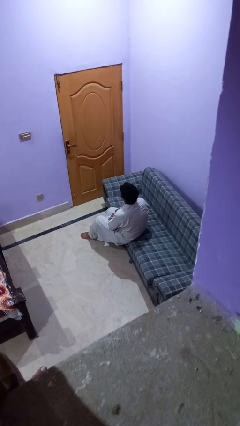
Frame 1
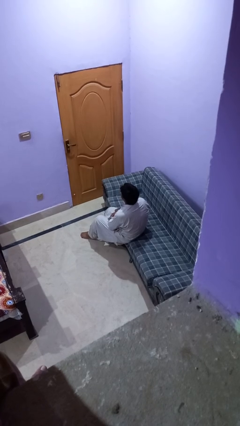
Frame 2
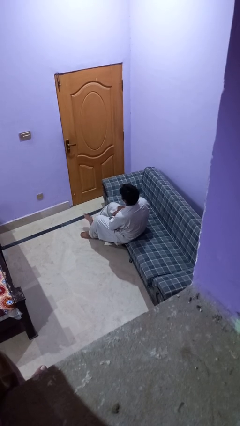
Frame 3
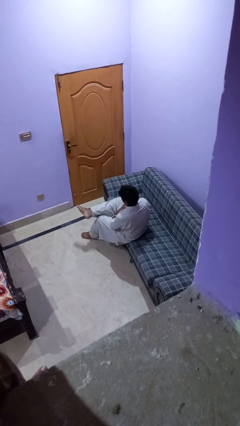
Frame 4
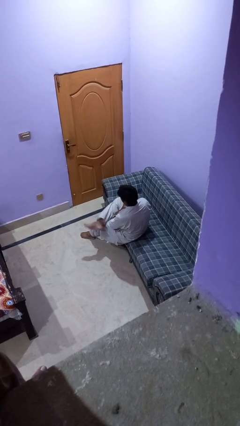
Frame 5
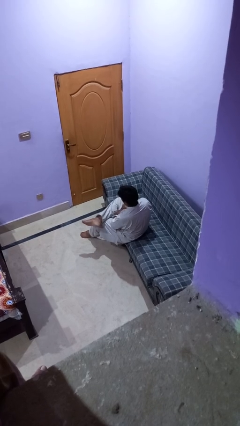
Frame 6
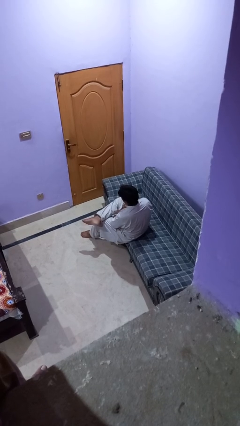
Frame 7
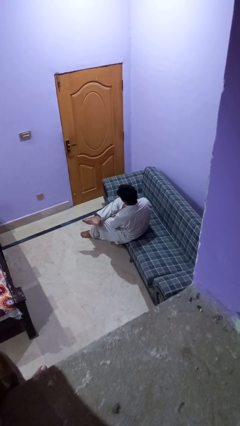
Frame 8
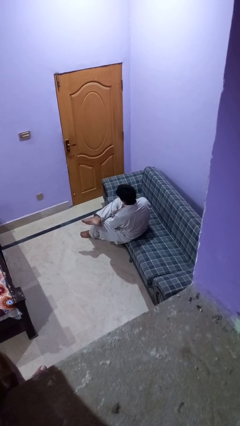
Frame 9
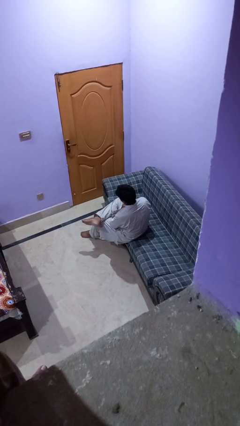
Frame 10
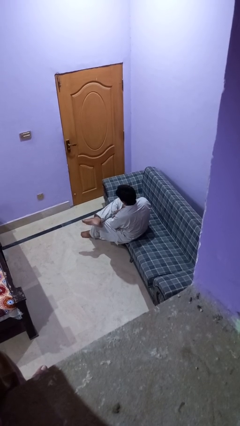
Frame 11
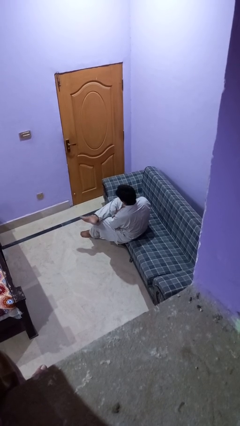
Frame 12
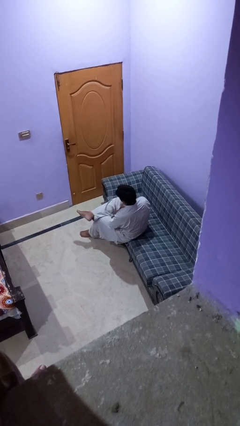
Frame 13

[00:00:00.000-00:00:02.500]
person crosses legs

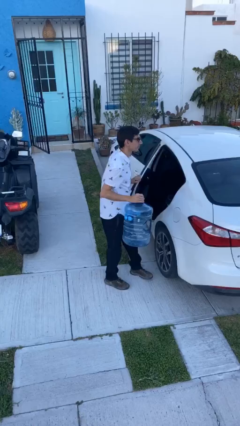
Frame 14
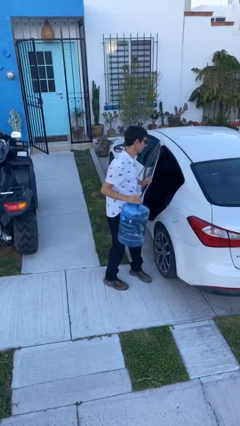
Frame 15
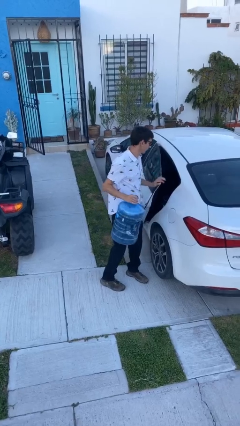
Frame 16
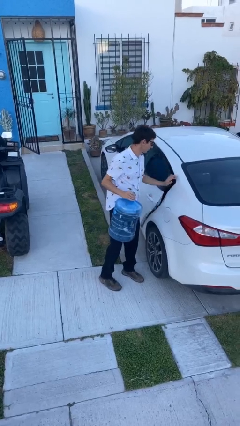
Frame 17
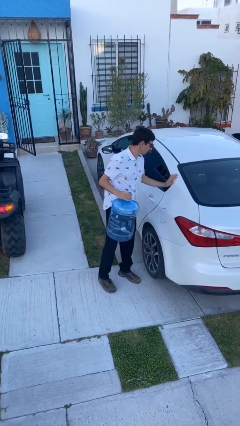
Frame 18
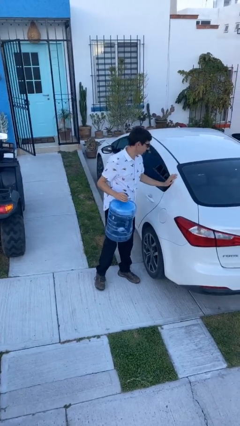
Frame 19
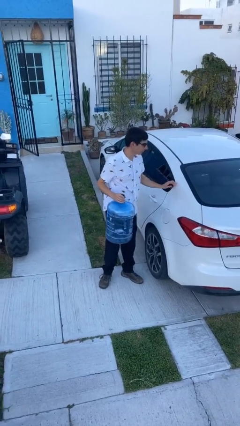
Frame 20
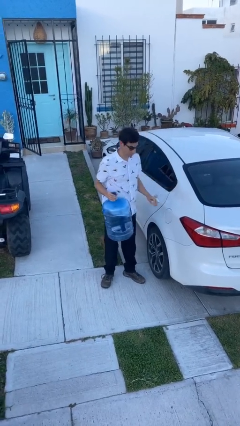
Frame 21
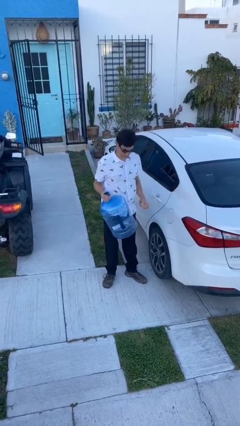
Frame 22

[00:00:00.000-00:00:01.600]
person closes car door

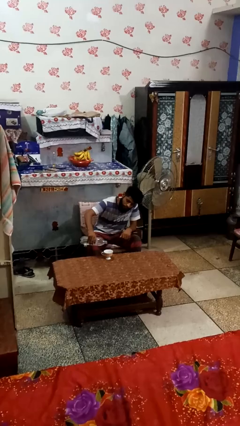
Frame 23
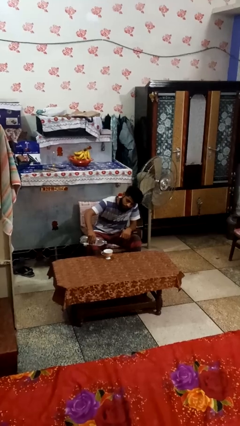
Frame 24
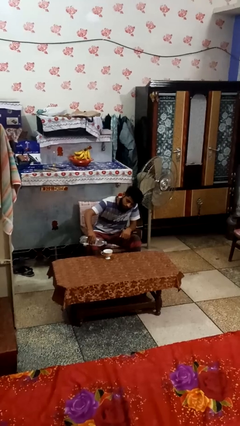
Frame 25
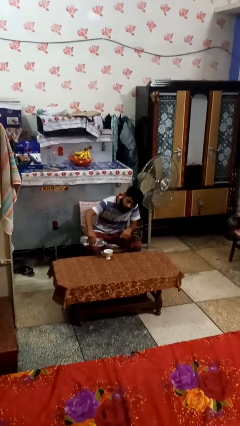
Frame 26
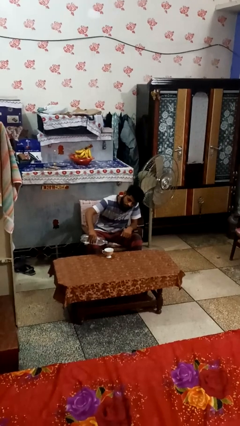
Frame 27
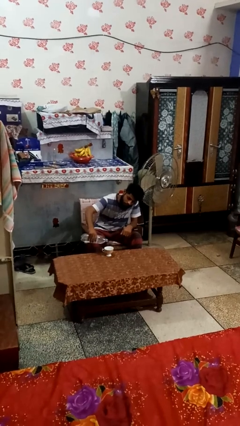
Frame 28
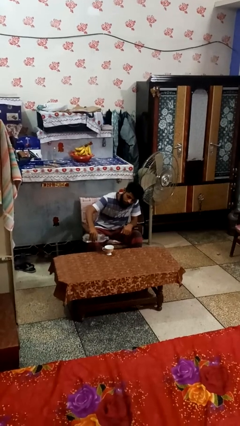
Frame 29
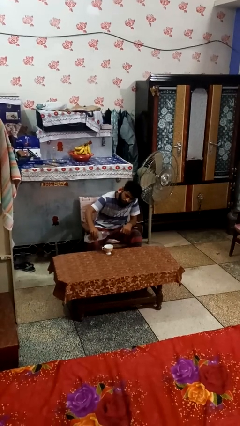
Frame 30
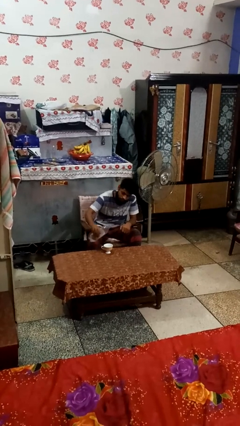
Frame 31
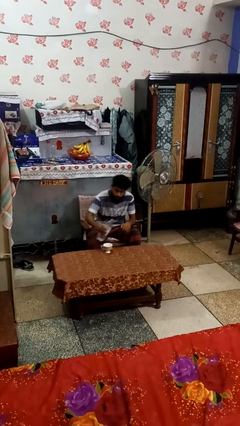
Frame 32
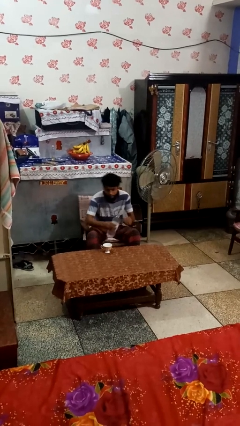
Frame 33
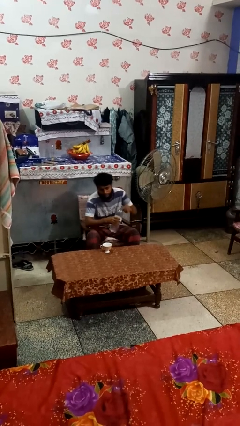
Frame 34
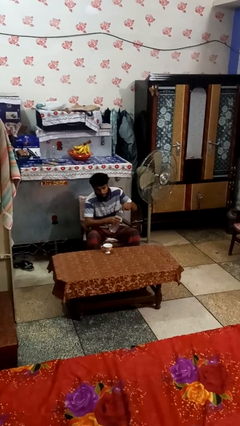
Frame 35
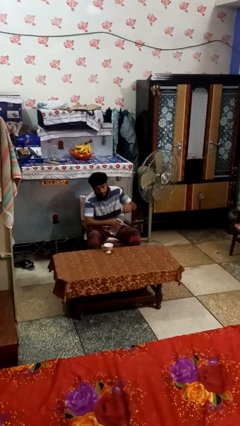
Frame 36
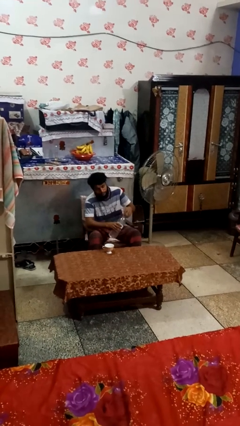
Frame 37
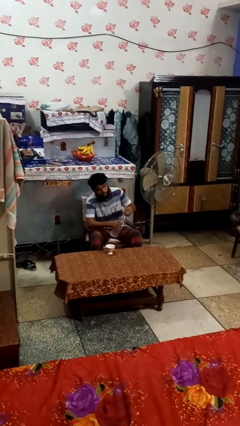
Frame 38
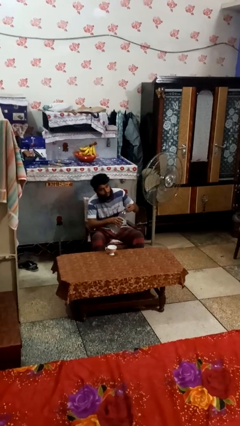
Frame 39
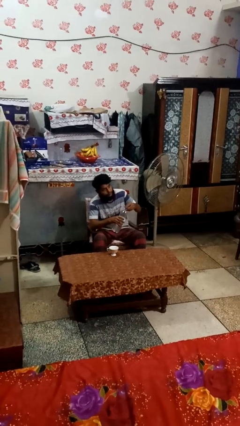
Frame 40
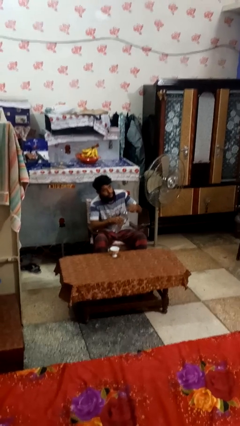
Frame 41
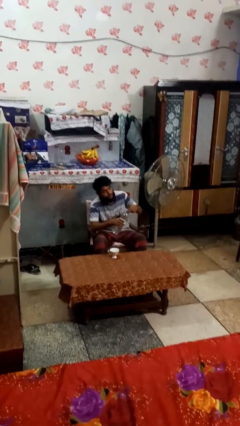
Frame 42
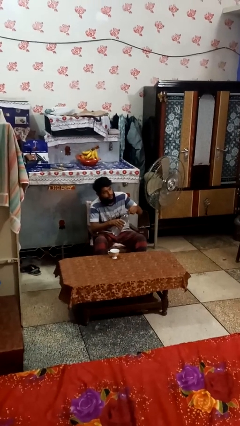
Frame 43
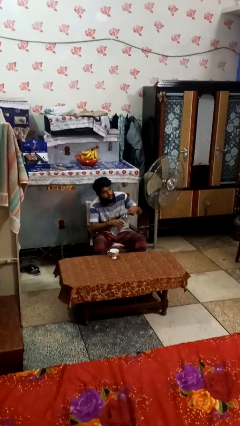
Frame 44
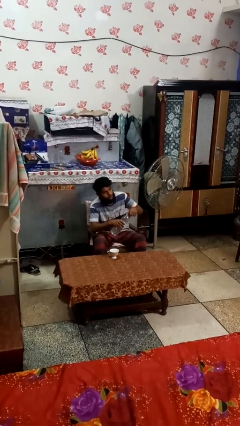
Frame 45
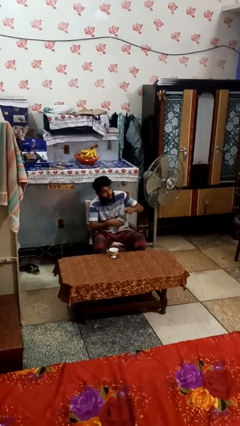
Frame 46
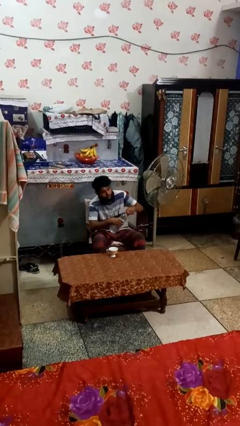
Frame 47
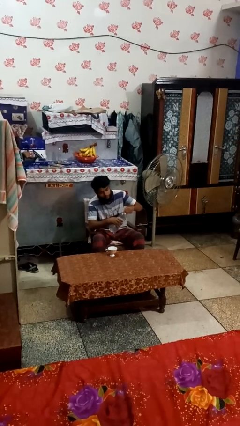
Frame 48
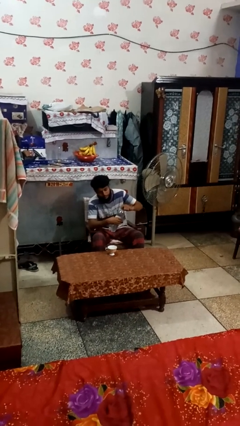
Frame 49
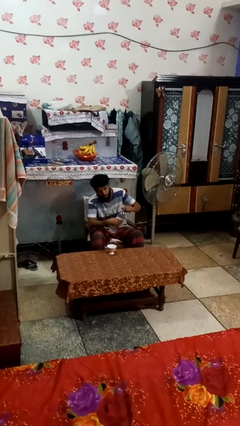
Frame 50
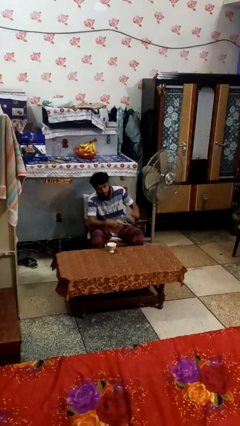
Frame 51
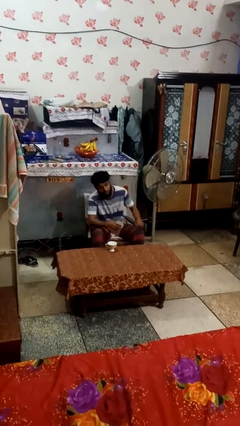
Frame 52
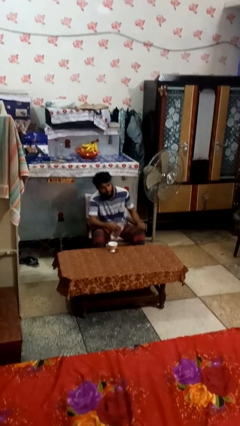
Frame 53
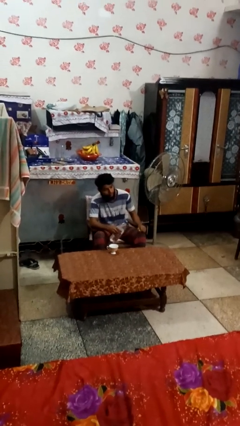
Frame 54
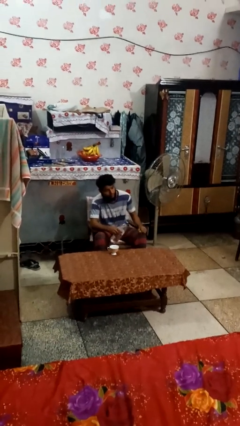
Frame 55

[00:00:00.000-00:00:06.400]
person screws lid to bottle

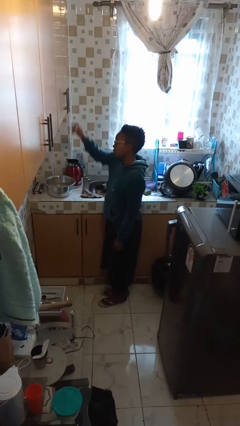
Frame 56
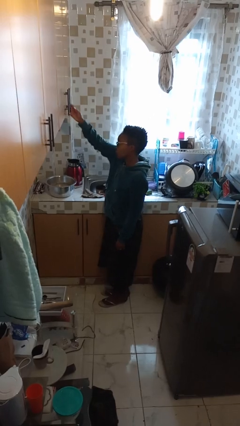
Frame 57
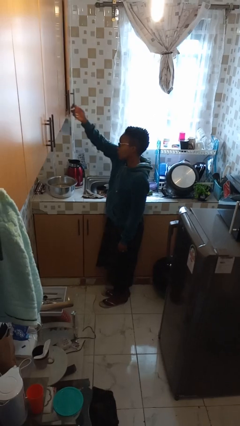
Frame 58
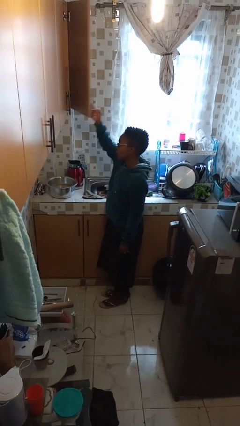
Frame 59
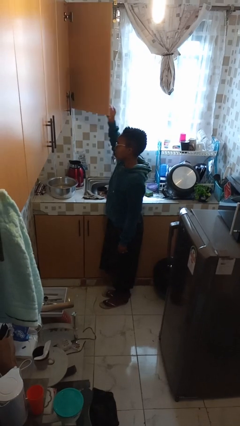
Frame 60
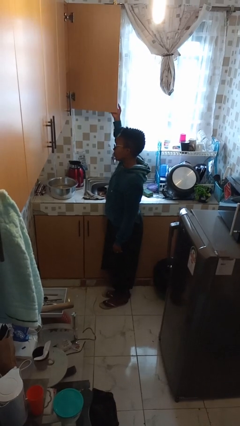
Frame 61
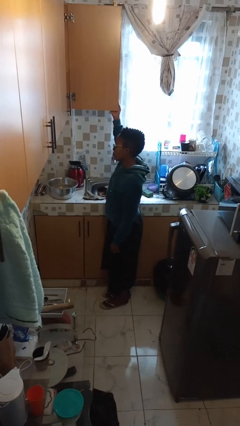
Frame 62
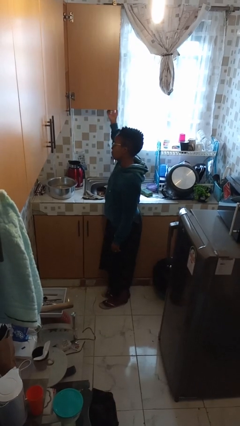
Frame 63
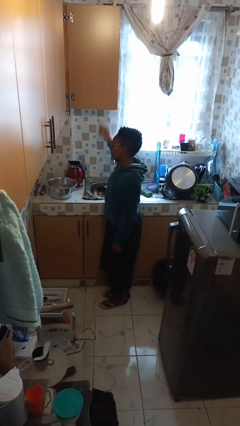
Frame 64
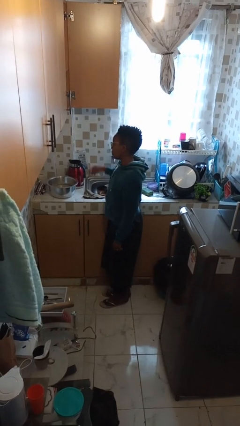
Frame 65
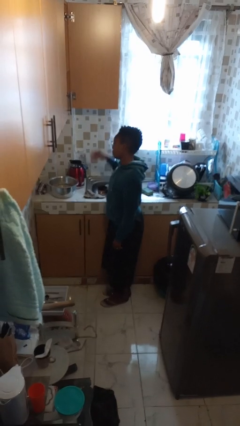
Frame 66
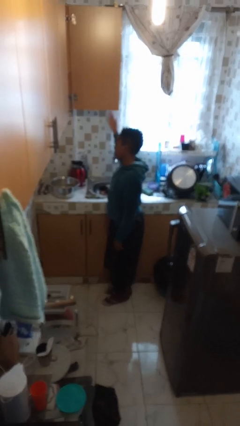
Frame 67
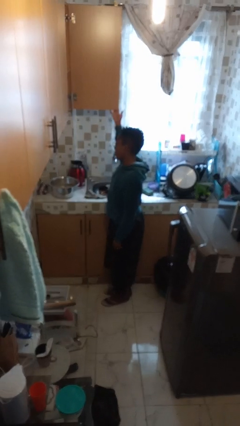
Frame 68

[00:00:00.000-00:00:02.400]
person opens cabinet

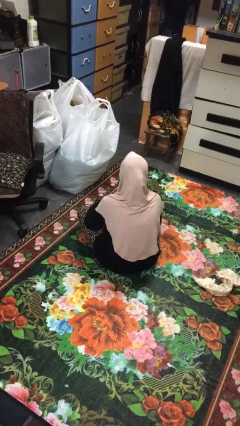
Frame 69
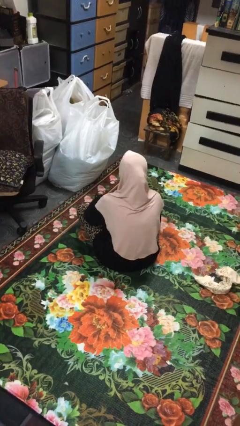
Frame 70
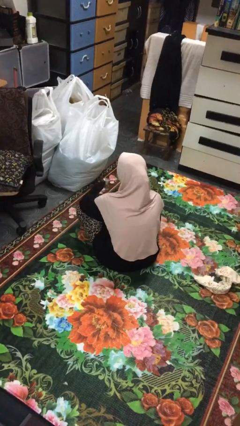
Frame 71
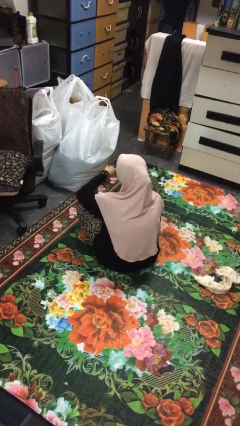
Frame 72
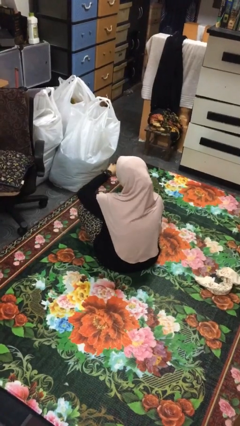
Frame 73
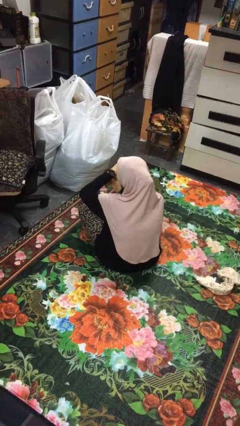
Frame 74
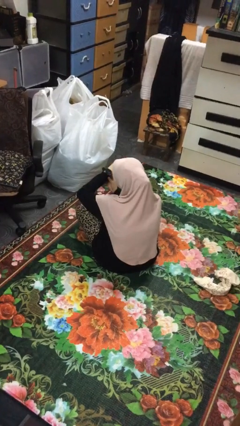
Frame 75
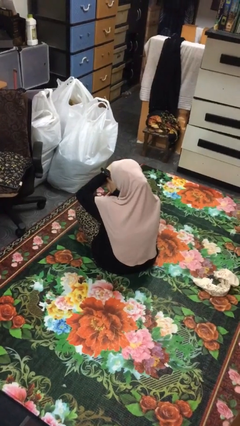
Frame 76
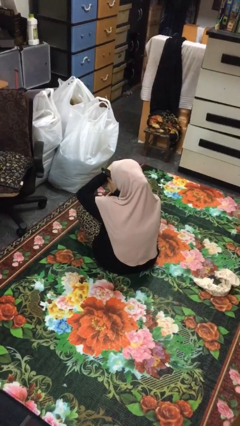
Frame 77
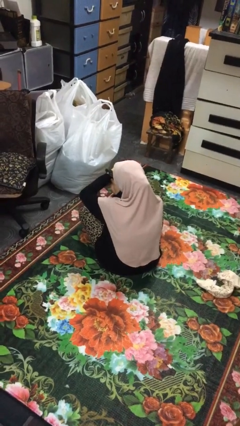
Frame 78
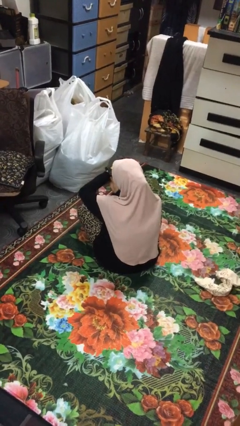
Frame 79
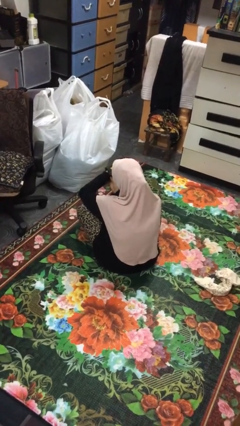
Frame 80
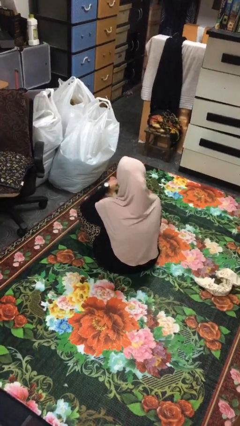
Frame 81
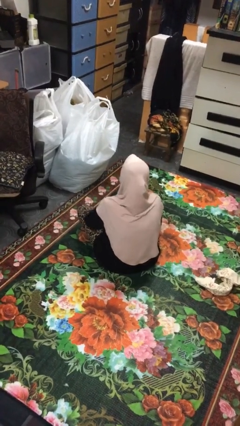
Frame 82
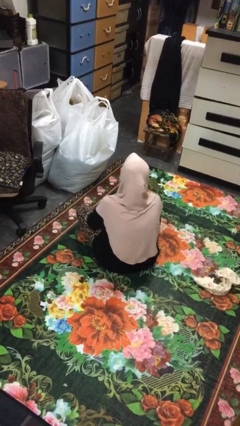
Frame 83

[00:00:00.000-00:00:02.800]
person looks at wristwatch

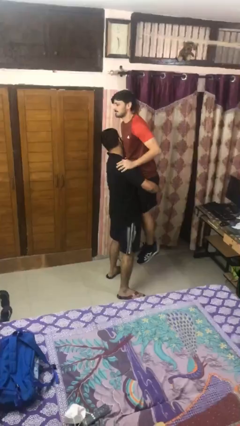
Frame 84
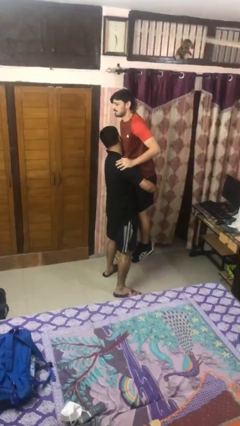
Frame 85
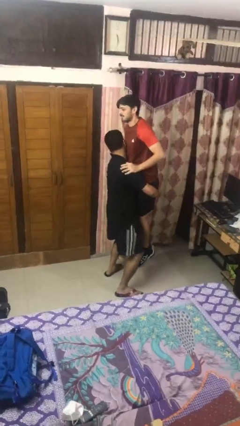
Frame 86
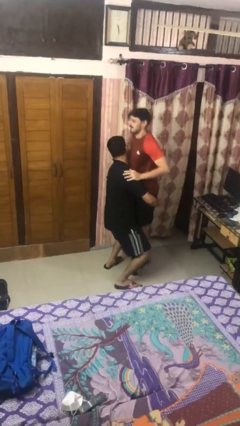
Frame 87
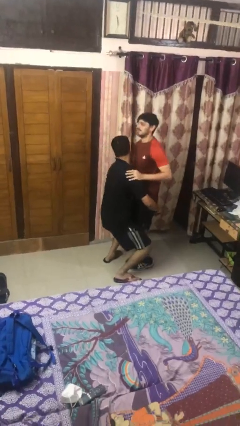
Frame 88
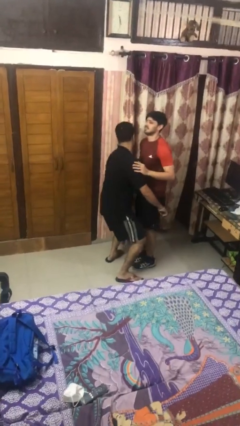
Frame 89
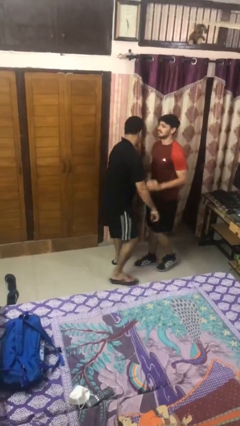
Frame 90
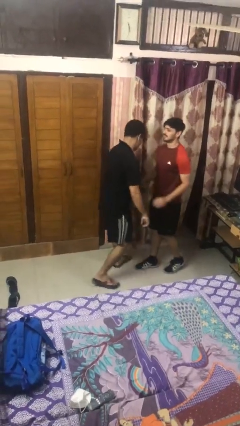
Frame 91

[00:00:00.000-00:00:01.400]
person puts down person
